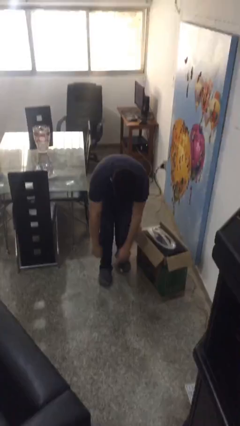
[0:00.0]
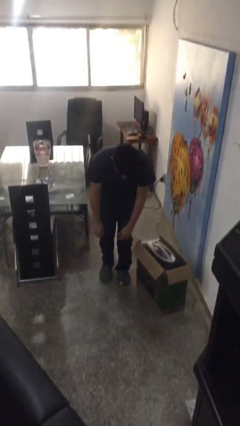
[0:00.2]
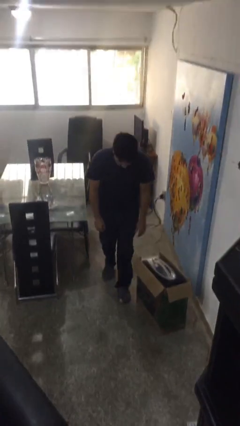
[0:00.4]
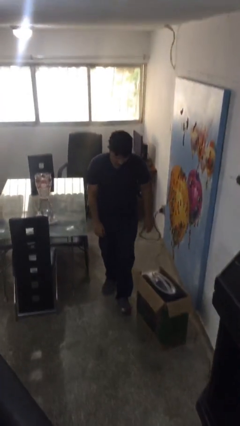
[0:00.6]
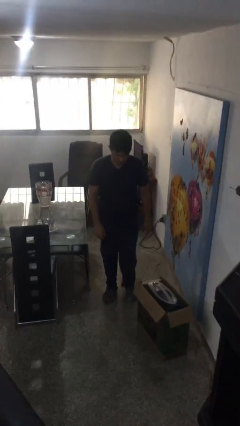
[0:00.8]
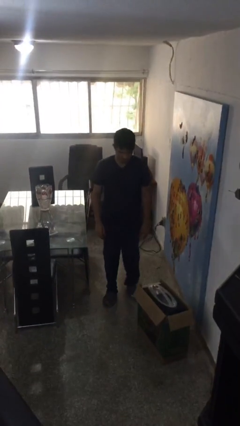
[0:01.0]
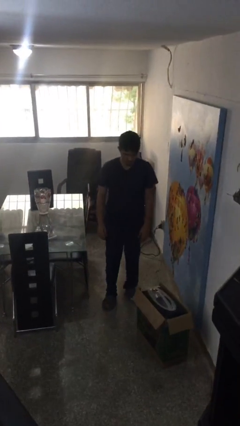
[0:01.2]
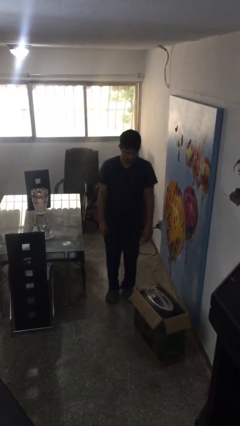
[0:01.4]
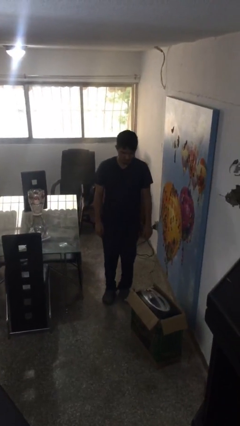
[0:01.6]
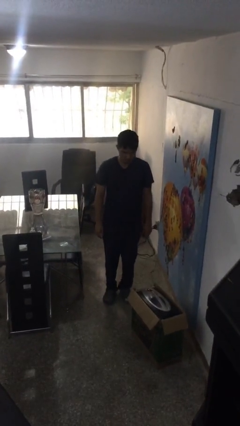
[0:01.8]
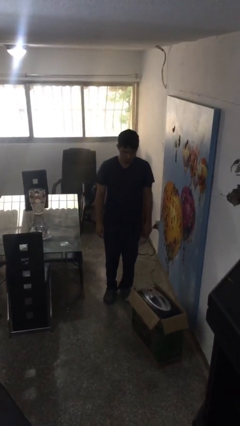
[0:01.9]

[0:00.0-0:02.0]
person stands up from floor

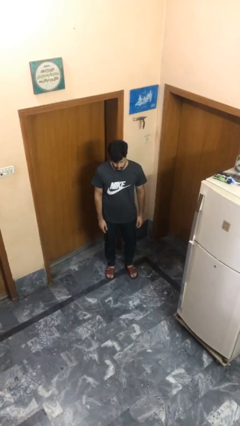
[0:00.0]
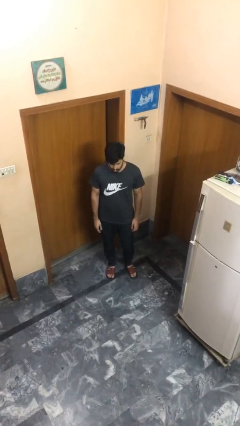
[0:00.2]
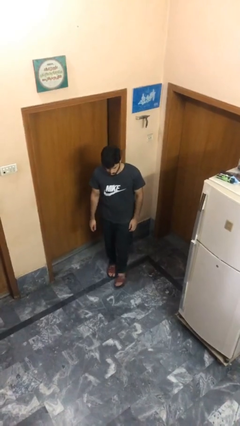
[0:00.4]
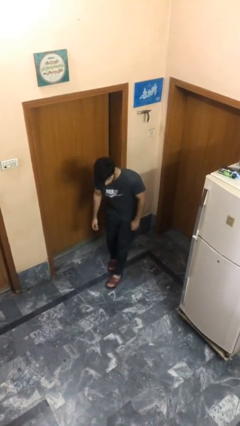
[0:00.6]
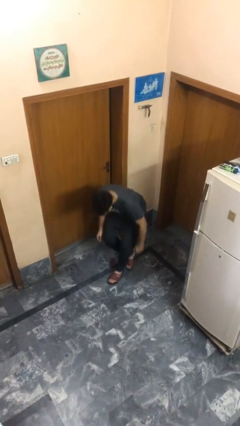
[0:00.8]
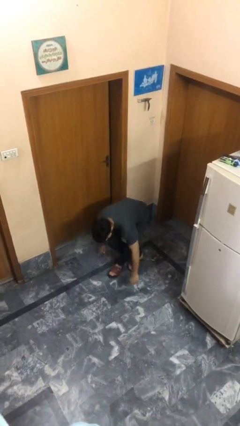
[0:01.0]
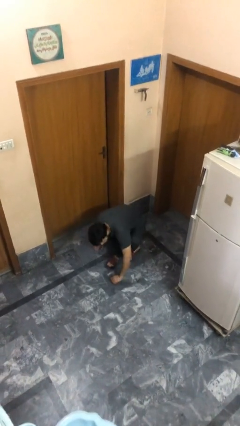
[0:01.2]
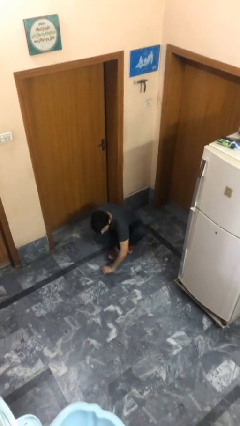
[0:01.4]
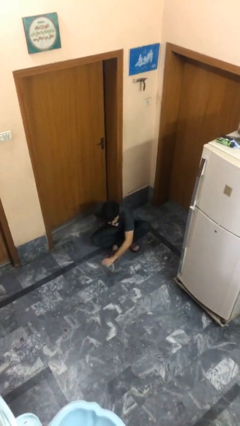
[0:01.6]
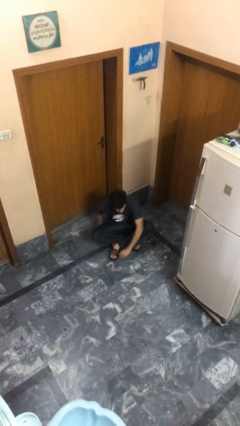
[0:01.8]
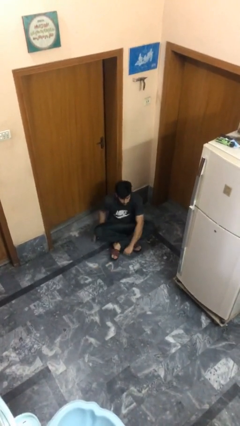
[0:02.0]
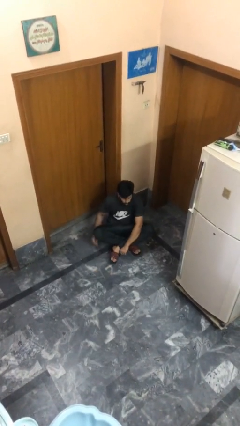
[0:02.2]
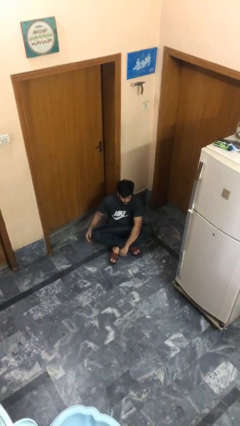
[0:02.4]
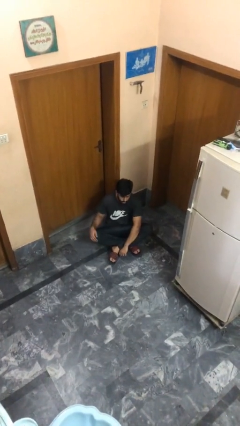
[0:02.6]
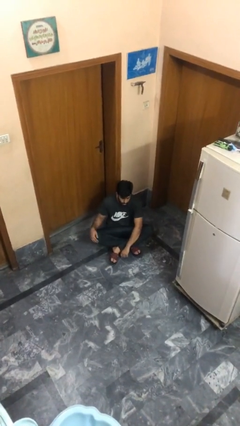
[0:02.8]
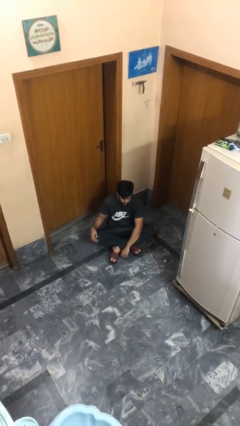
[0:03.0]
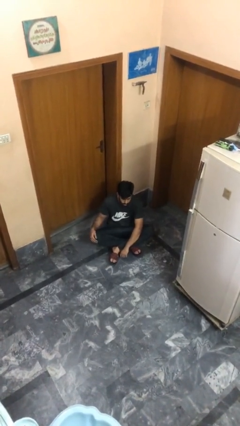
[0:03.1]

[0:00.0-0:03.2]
person sits crisscross

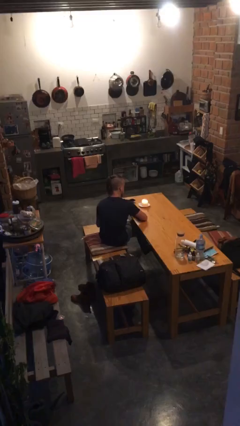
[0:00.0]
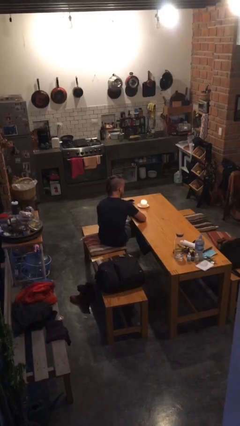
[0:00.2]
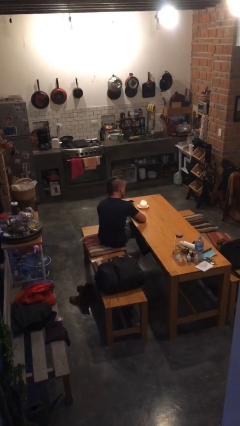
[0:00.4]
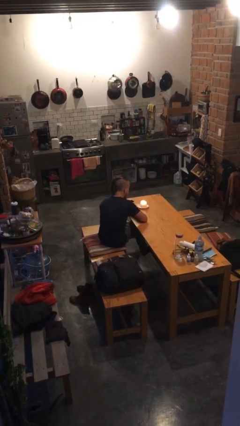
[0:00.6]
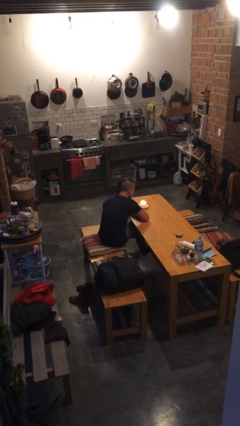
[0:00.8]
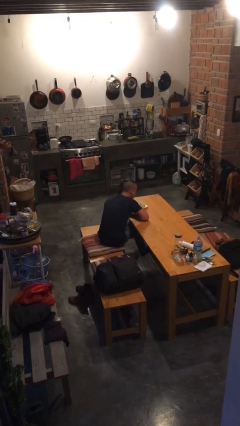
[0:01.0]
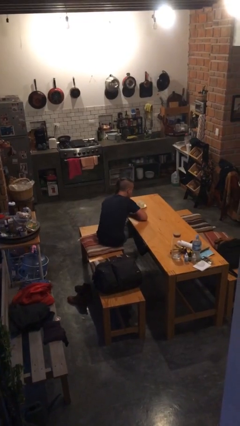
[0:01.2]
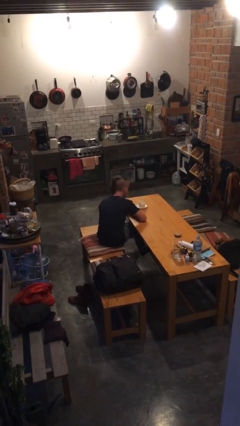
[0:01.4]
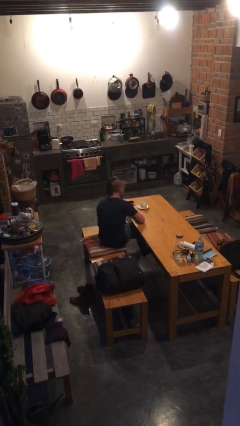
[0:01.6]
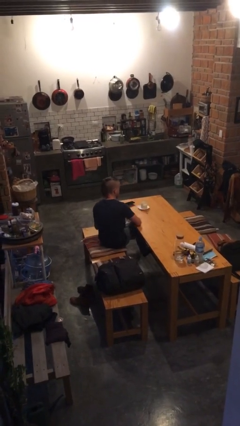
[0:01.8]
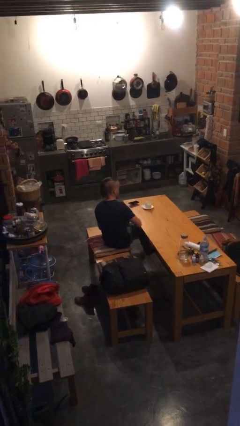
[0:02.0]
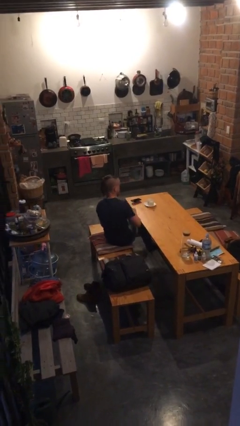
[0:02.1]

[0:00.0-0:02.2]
person extinguishes candle

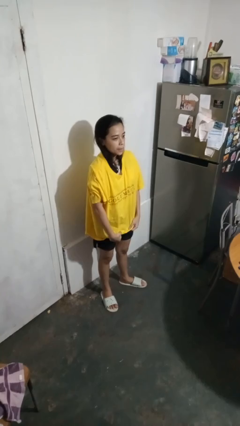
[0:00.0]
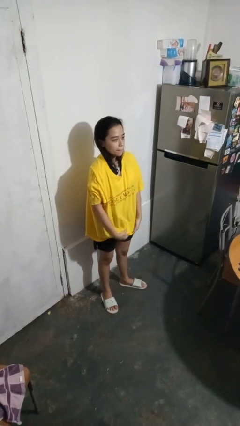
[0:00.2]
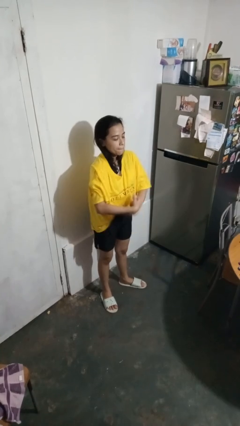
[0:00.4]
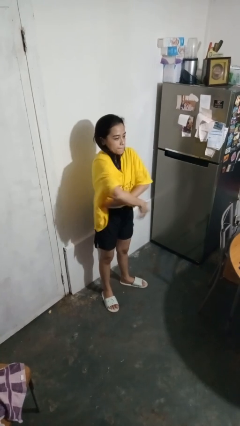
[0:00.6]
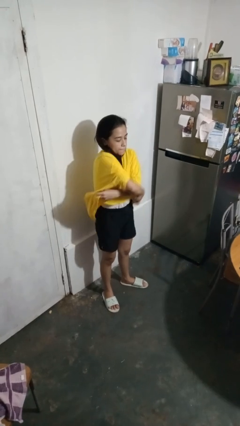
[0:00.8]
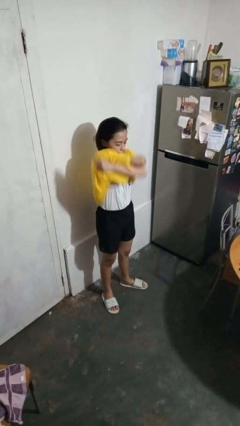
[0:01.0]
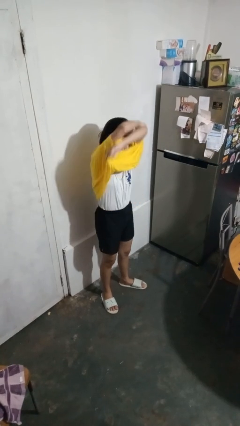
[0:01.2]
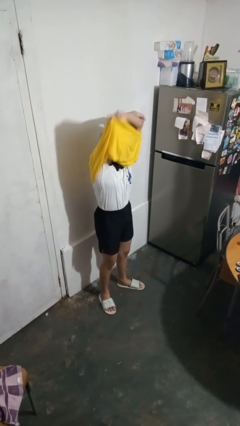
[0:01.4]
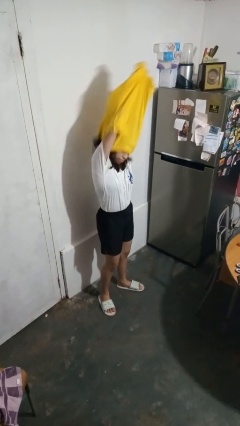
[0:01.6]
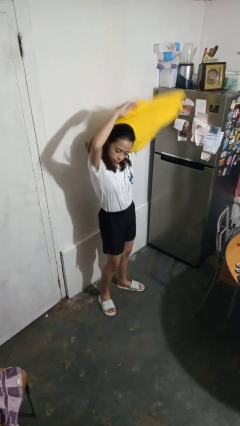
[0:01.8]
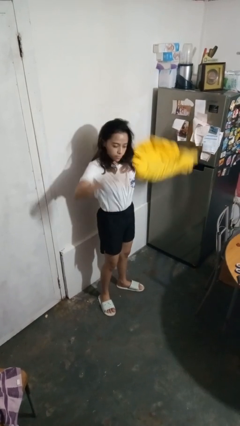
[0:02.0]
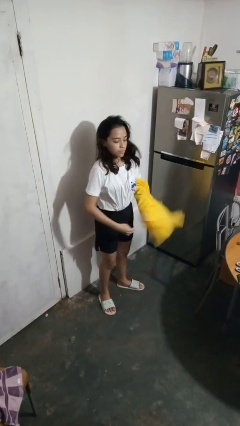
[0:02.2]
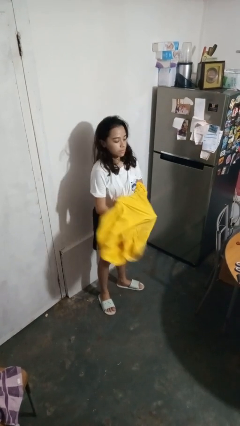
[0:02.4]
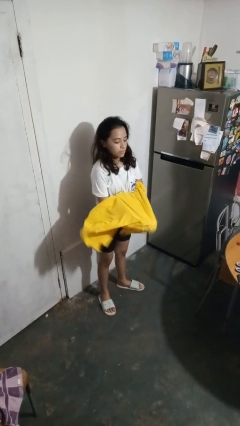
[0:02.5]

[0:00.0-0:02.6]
person takes off shirt

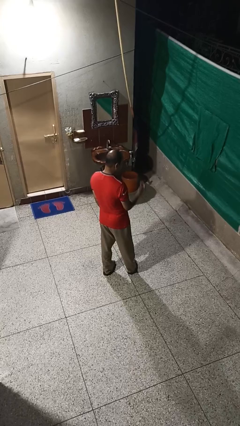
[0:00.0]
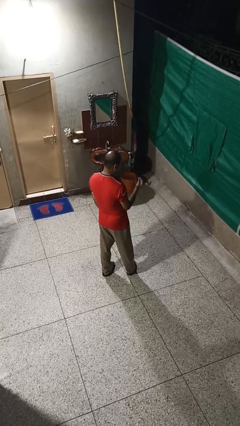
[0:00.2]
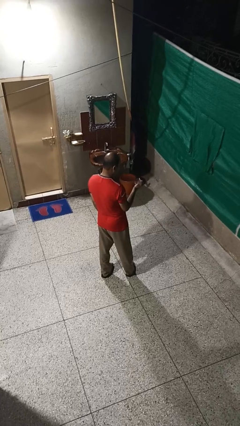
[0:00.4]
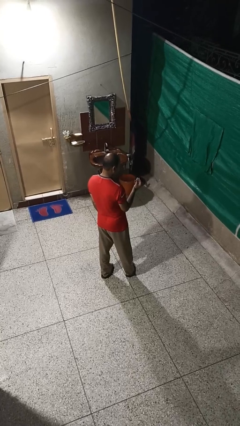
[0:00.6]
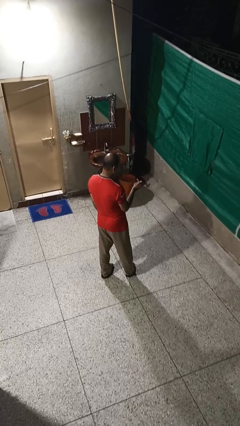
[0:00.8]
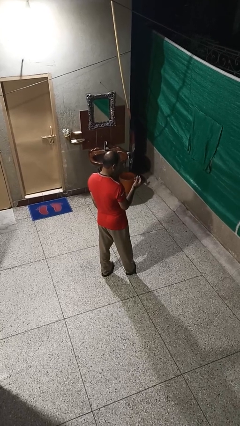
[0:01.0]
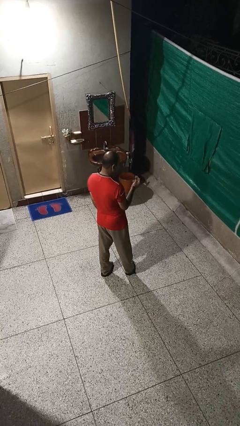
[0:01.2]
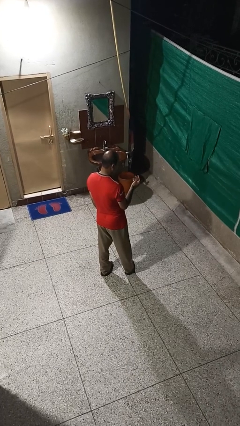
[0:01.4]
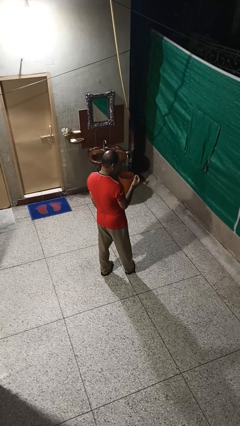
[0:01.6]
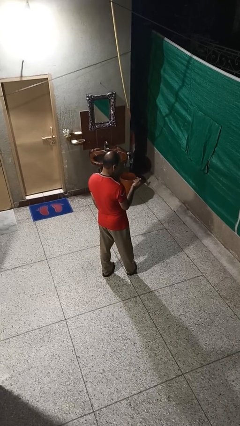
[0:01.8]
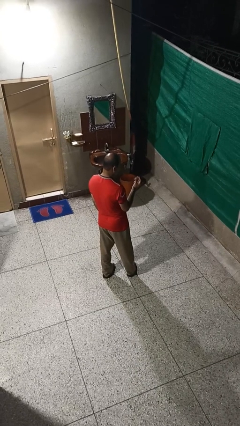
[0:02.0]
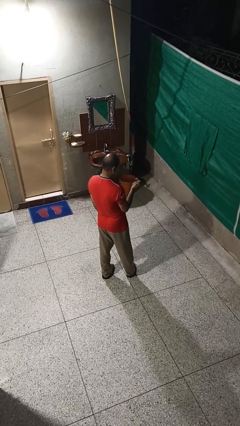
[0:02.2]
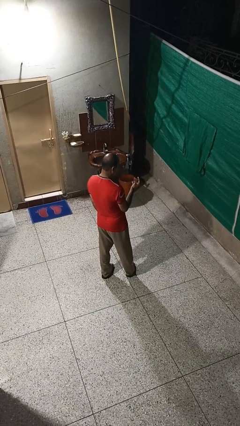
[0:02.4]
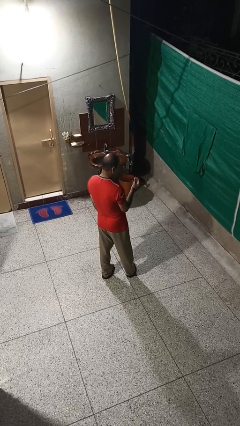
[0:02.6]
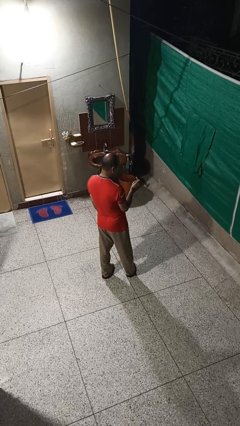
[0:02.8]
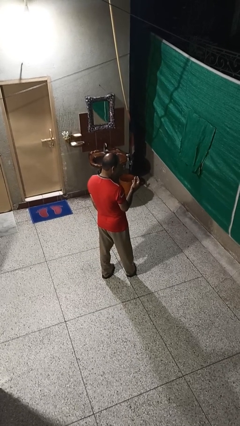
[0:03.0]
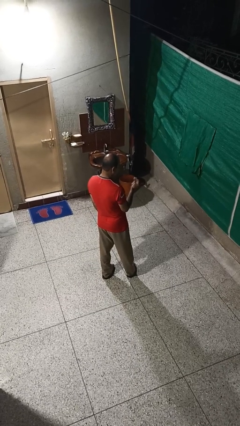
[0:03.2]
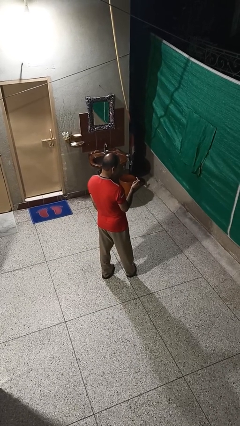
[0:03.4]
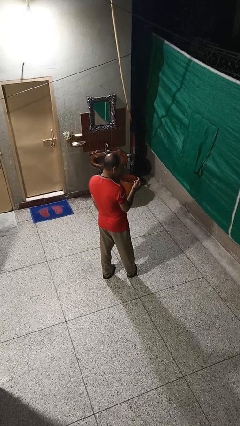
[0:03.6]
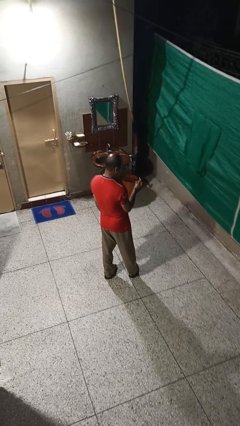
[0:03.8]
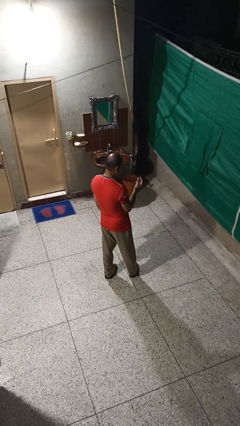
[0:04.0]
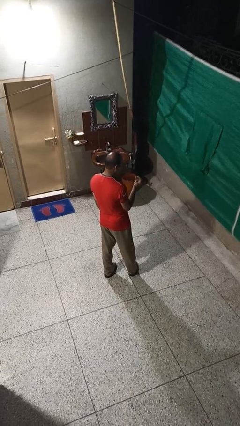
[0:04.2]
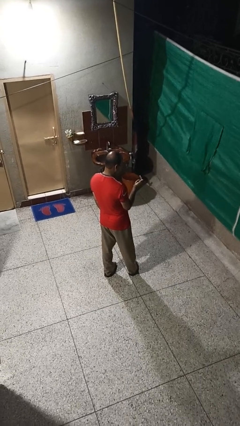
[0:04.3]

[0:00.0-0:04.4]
person snaps fingers

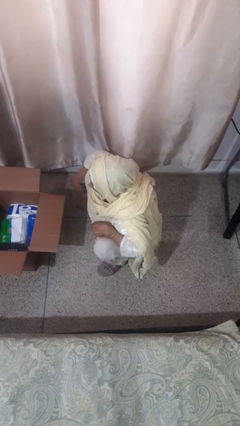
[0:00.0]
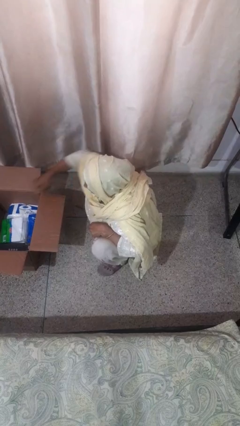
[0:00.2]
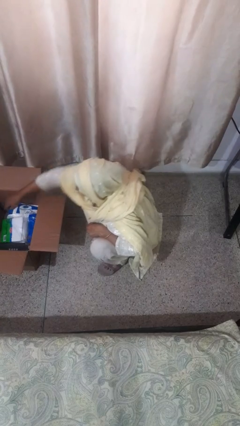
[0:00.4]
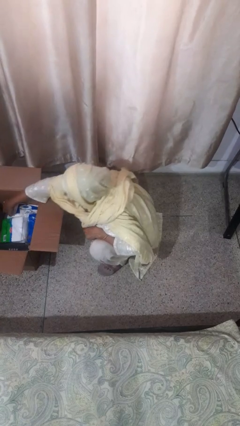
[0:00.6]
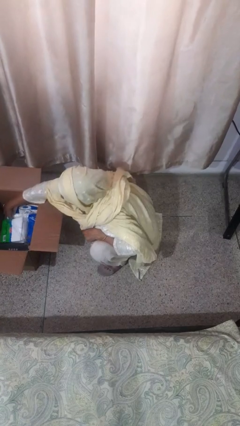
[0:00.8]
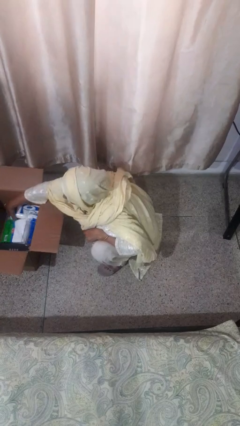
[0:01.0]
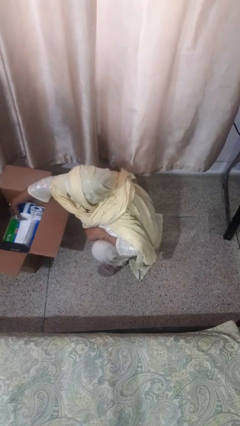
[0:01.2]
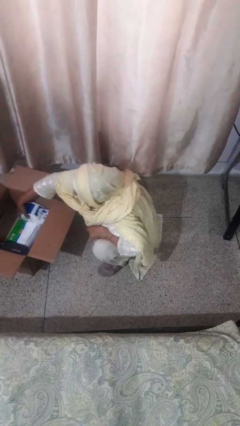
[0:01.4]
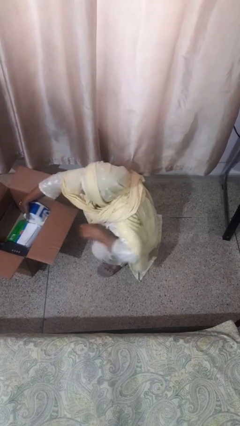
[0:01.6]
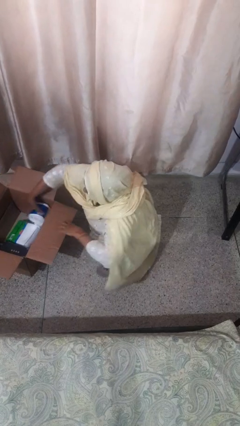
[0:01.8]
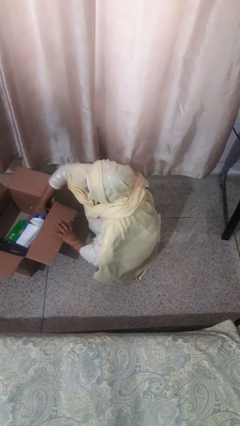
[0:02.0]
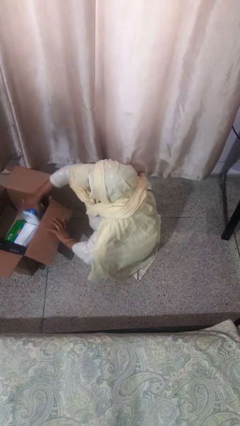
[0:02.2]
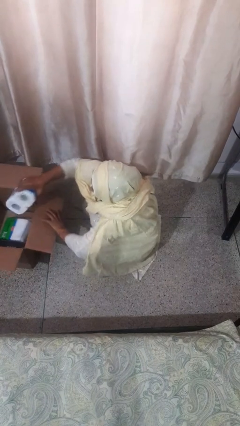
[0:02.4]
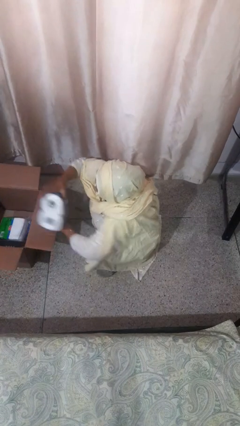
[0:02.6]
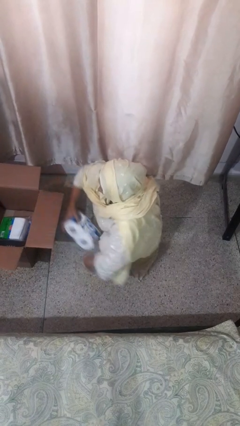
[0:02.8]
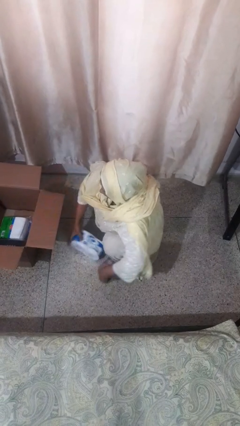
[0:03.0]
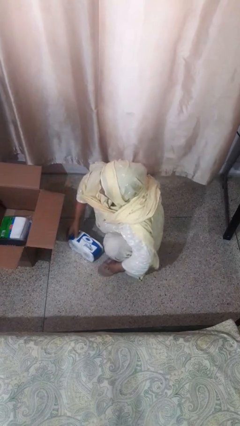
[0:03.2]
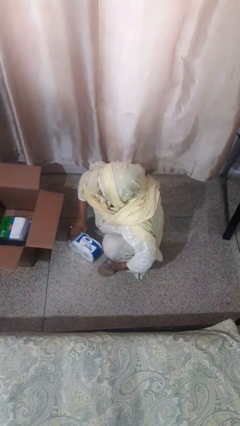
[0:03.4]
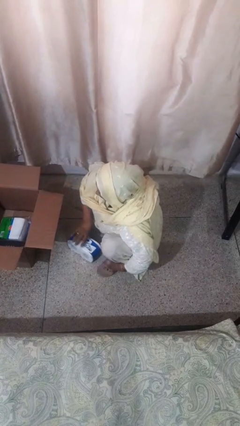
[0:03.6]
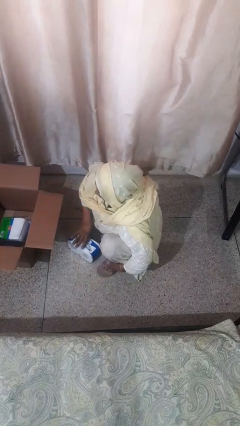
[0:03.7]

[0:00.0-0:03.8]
person takes object from box
